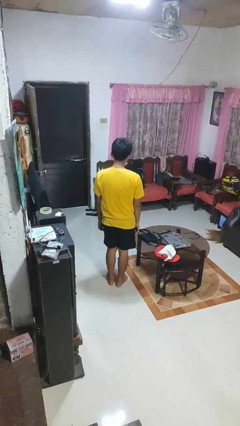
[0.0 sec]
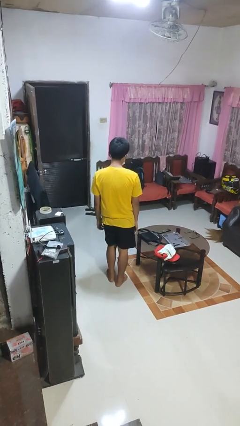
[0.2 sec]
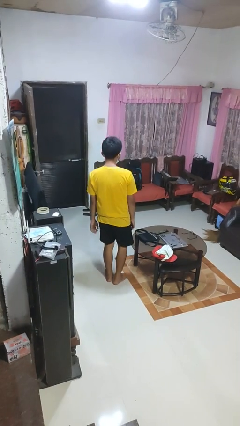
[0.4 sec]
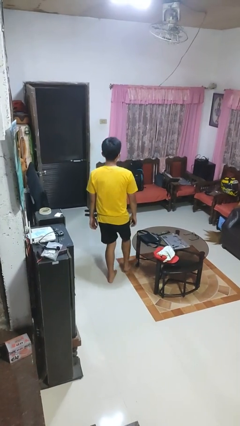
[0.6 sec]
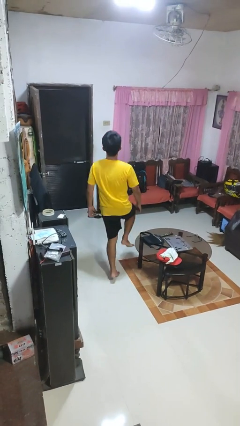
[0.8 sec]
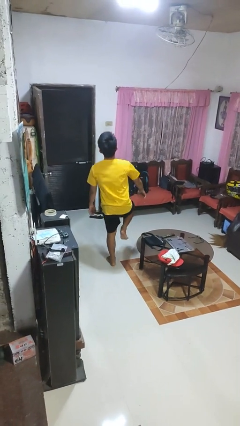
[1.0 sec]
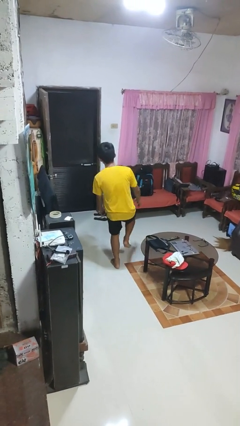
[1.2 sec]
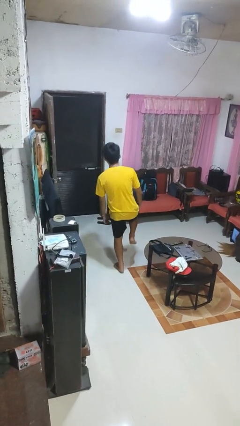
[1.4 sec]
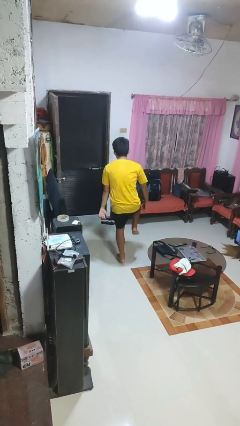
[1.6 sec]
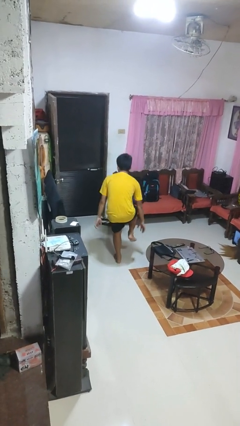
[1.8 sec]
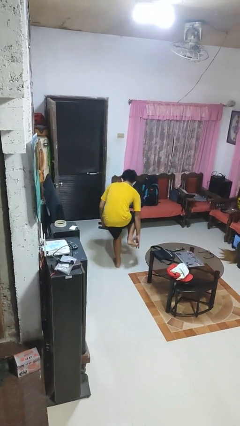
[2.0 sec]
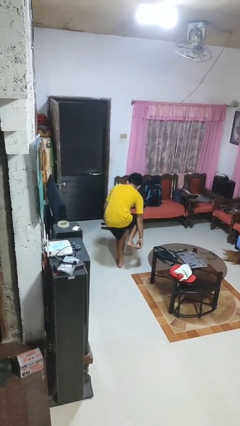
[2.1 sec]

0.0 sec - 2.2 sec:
person trips on object on floor

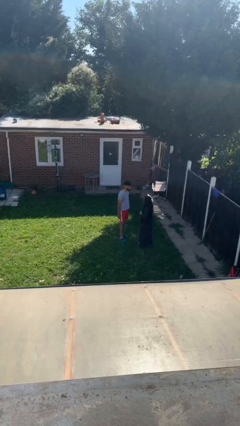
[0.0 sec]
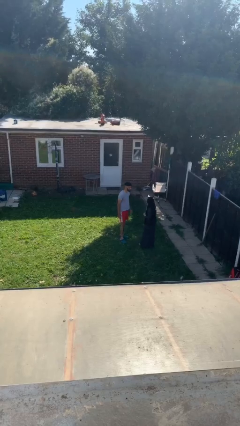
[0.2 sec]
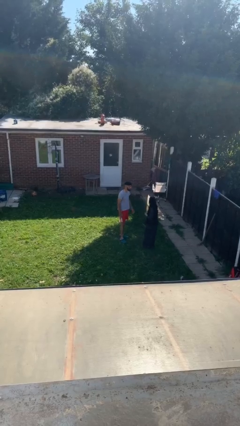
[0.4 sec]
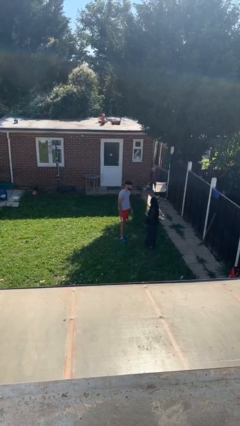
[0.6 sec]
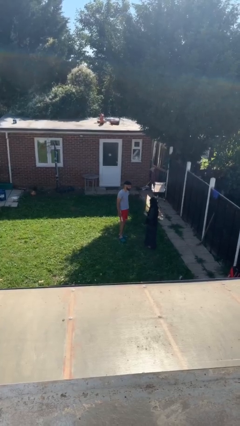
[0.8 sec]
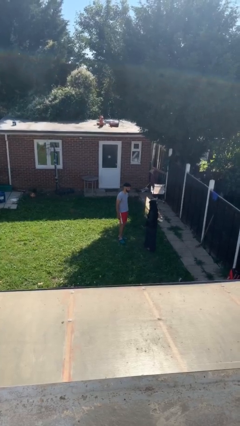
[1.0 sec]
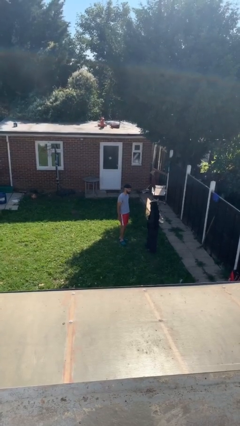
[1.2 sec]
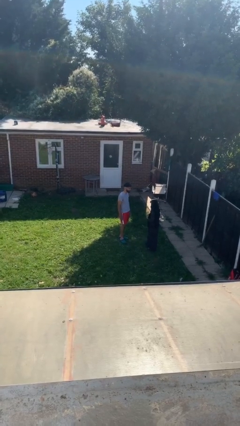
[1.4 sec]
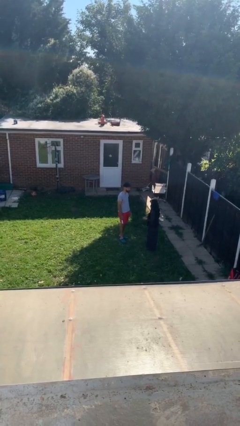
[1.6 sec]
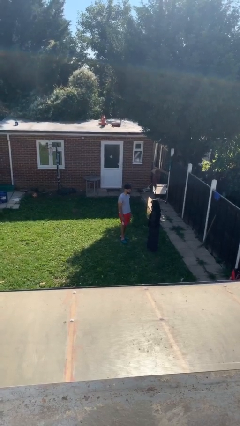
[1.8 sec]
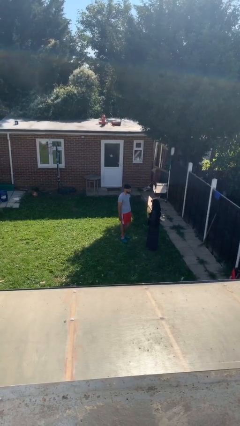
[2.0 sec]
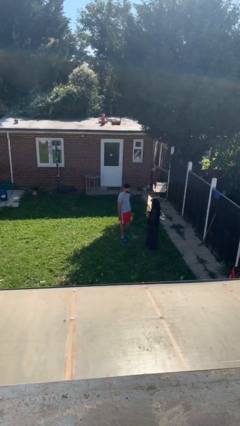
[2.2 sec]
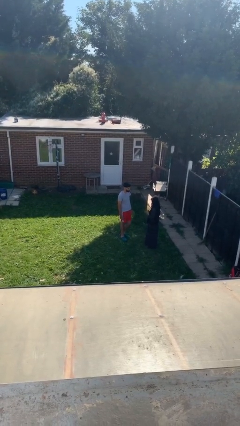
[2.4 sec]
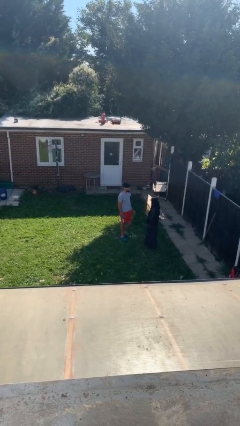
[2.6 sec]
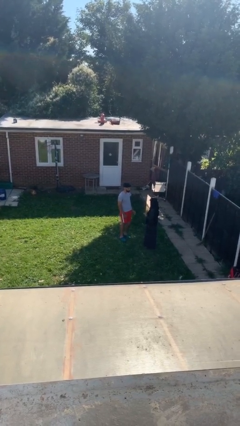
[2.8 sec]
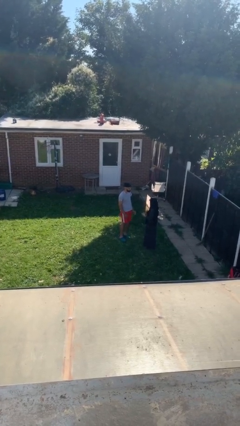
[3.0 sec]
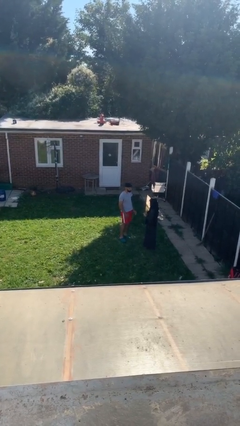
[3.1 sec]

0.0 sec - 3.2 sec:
person talks to person

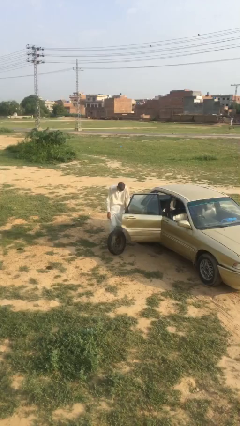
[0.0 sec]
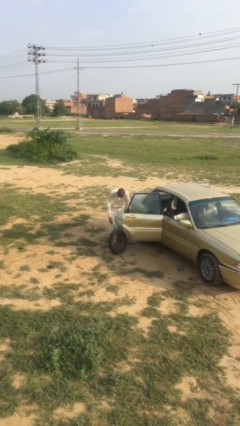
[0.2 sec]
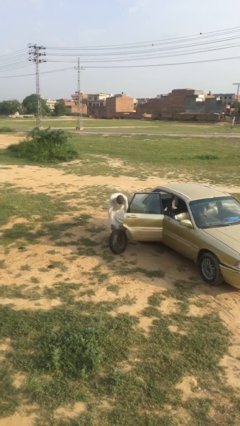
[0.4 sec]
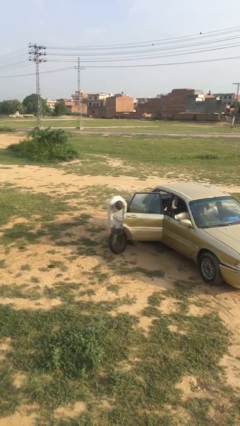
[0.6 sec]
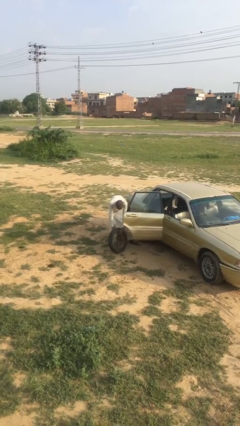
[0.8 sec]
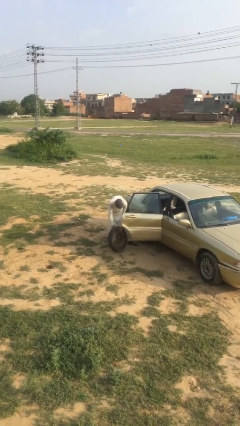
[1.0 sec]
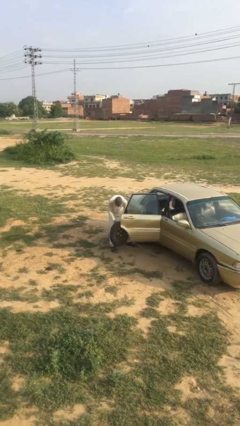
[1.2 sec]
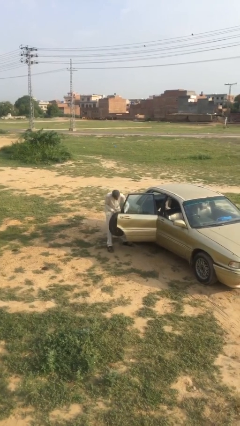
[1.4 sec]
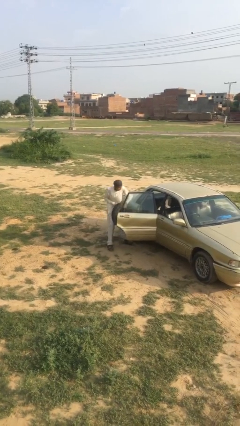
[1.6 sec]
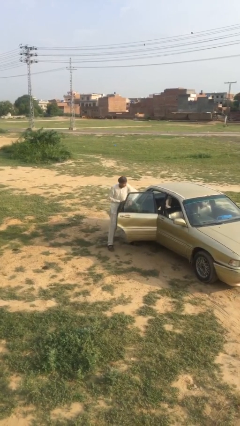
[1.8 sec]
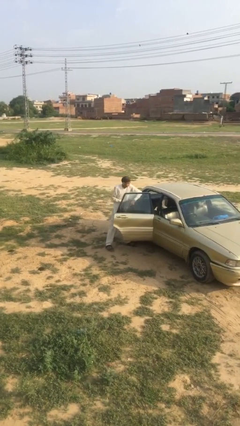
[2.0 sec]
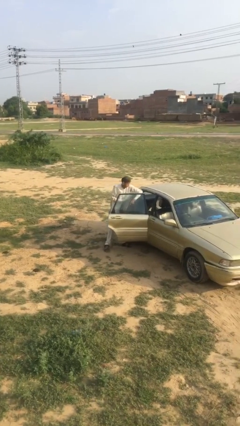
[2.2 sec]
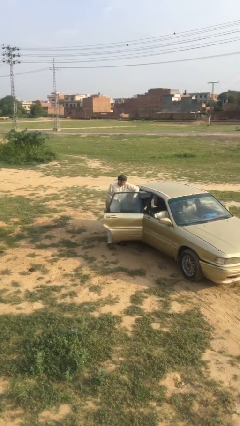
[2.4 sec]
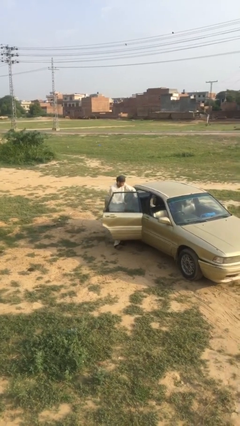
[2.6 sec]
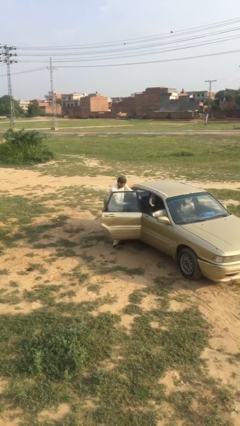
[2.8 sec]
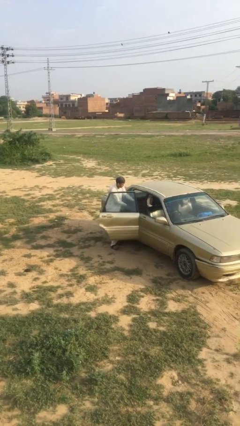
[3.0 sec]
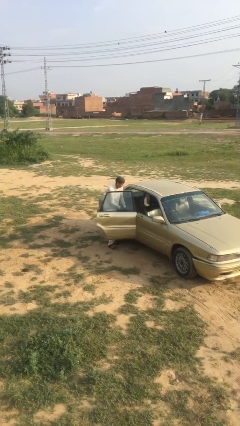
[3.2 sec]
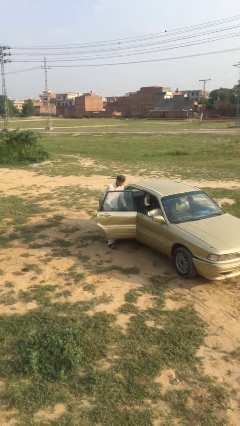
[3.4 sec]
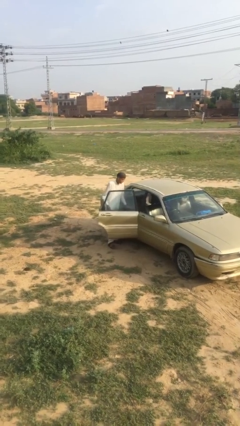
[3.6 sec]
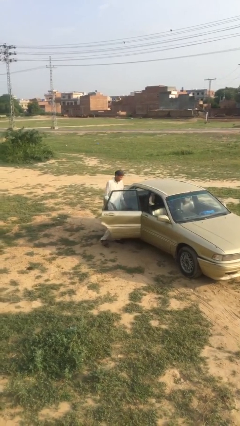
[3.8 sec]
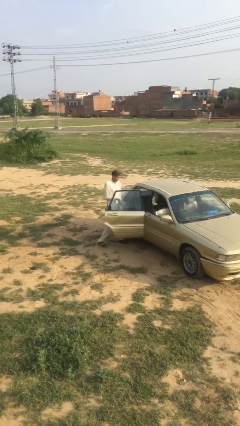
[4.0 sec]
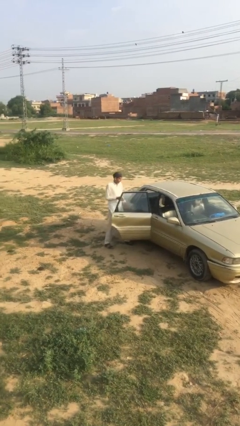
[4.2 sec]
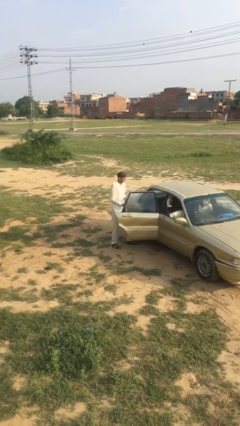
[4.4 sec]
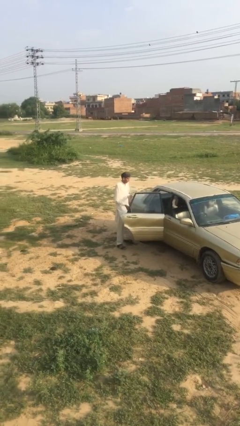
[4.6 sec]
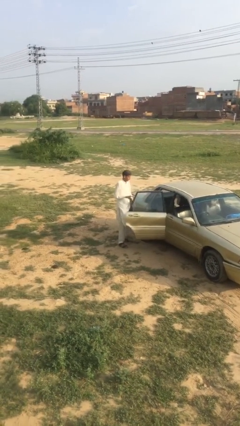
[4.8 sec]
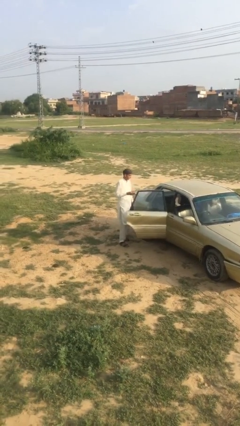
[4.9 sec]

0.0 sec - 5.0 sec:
person loads car

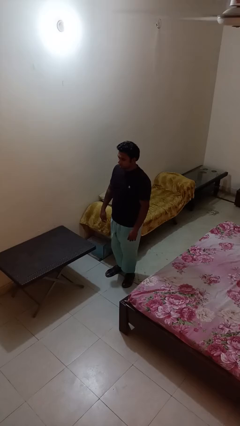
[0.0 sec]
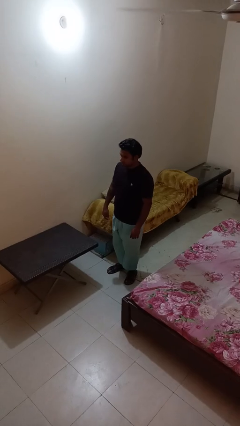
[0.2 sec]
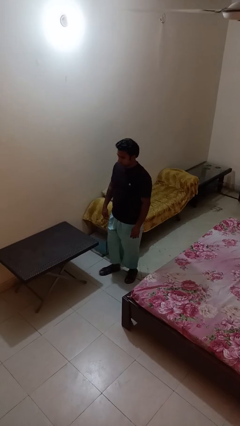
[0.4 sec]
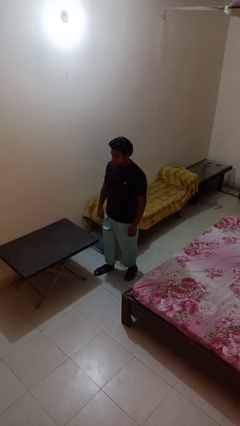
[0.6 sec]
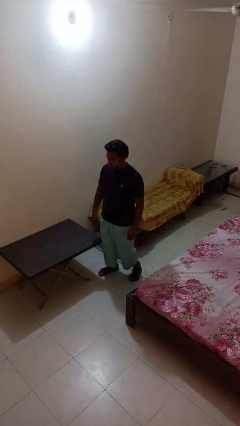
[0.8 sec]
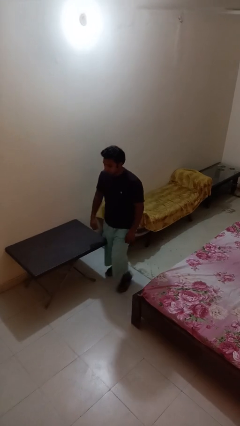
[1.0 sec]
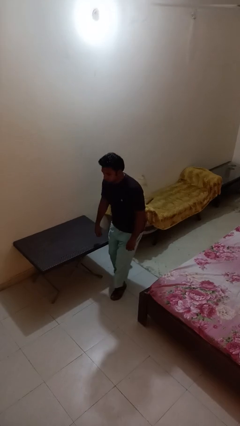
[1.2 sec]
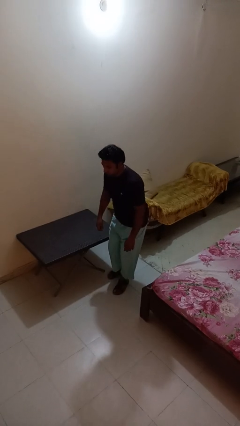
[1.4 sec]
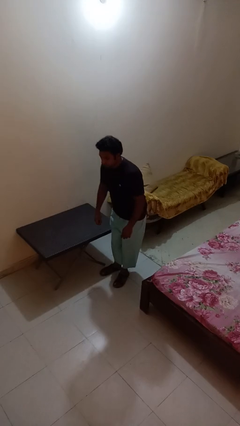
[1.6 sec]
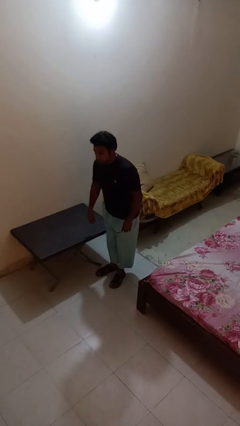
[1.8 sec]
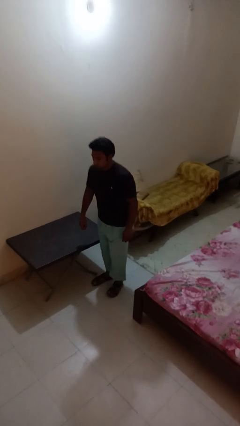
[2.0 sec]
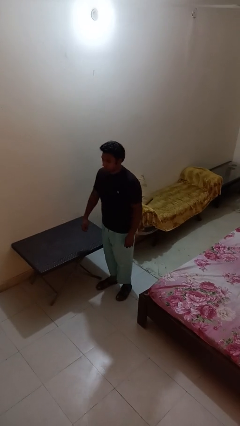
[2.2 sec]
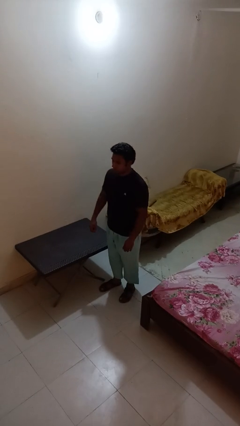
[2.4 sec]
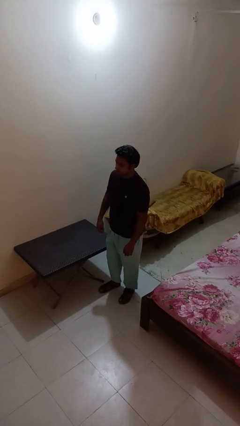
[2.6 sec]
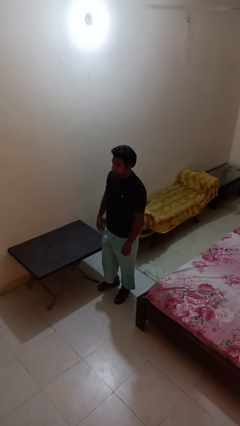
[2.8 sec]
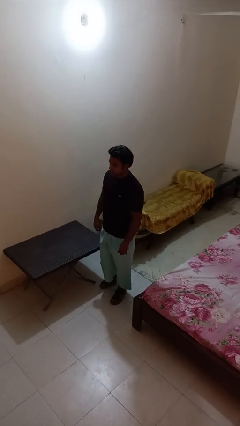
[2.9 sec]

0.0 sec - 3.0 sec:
person bumps into table

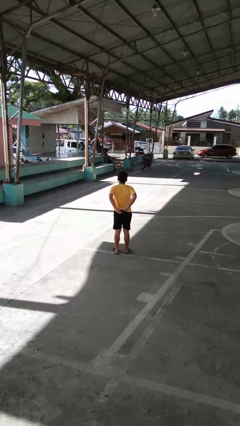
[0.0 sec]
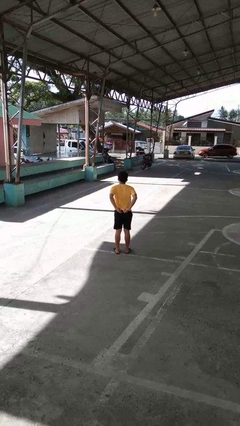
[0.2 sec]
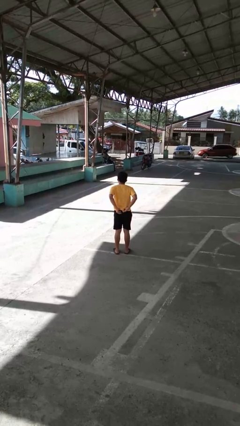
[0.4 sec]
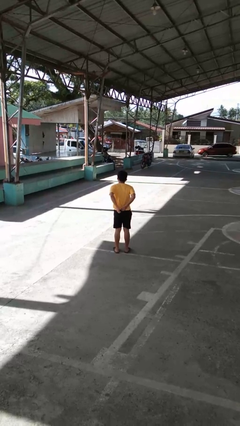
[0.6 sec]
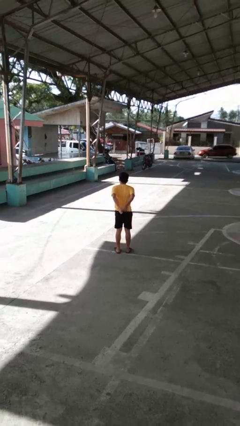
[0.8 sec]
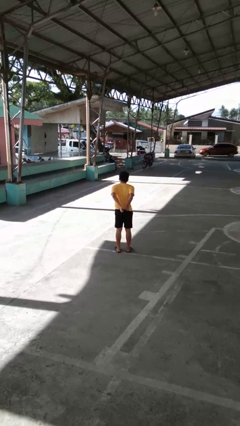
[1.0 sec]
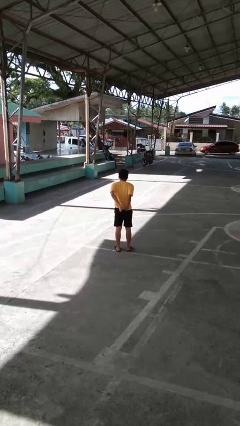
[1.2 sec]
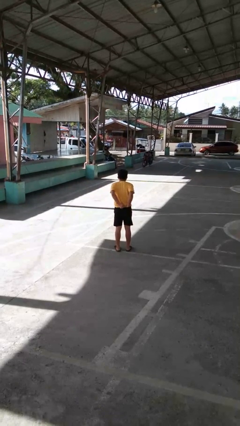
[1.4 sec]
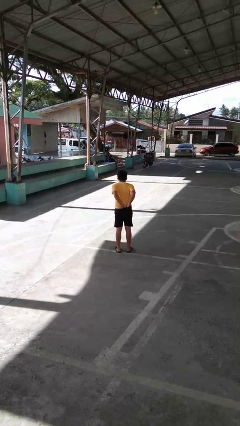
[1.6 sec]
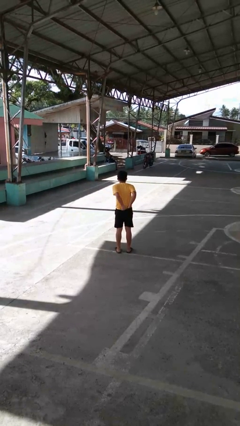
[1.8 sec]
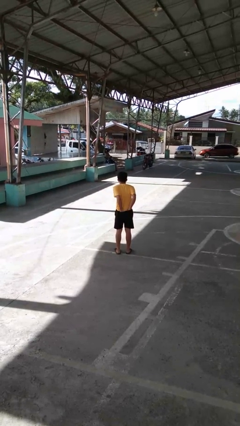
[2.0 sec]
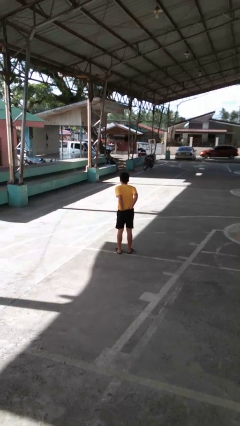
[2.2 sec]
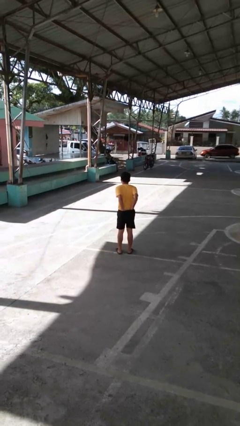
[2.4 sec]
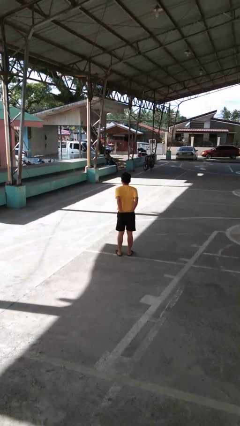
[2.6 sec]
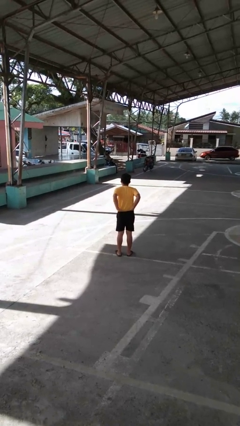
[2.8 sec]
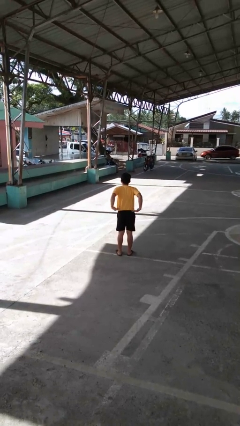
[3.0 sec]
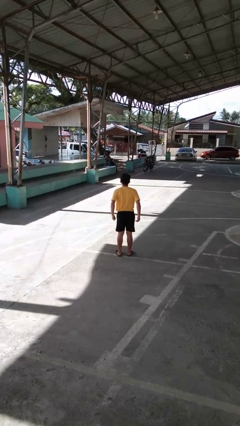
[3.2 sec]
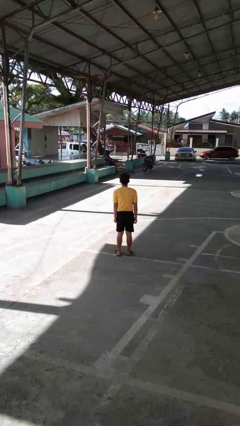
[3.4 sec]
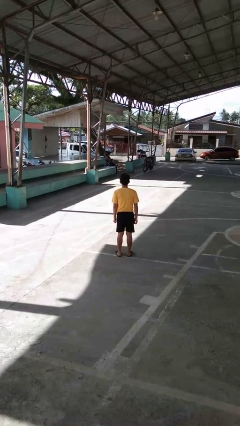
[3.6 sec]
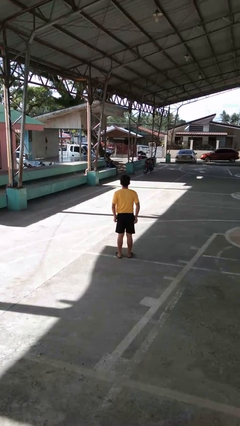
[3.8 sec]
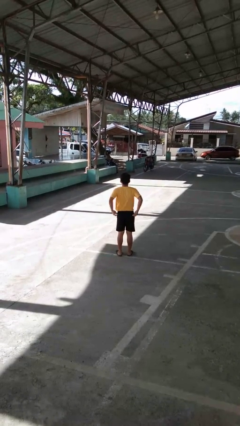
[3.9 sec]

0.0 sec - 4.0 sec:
person tucks in shirt
